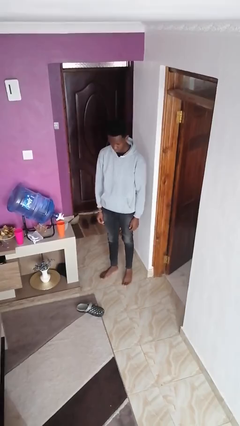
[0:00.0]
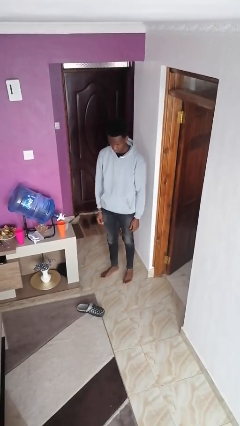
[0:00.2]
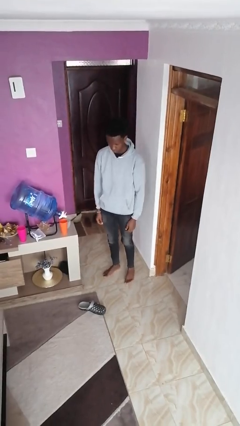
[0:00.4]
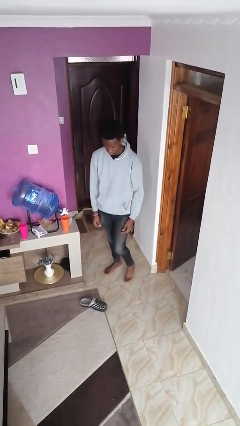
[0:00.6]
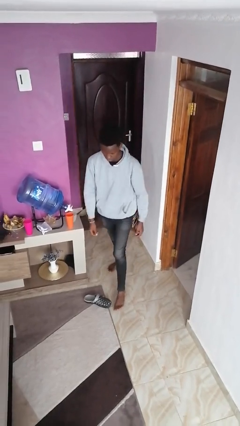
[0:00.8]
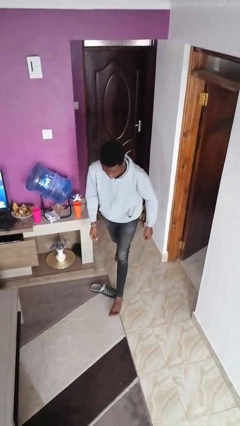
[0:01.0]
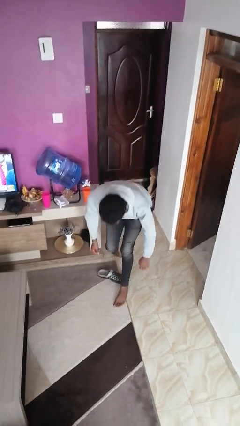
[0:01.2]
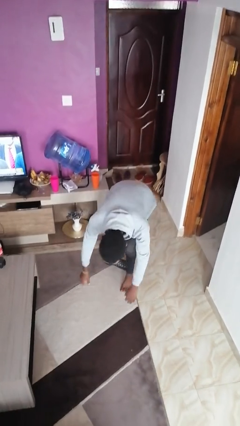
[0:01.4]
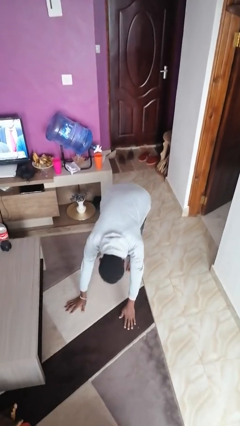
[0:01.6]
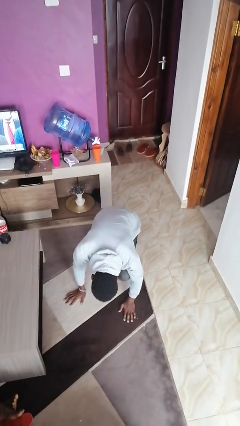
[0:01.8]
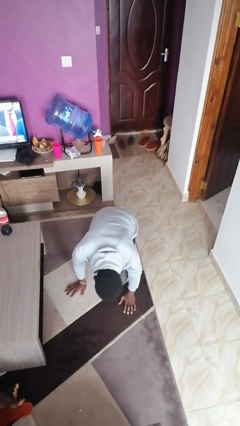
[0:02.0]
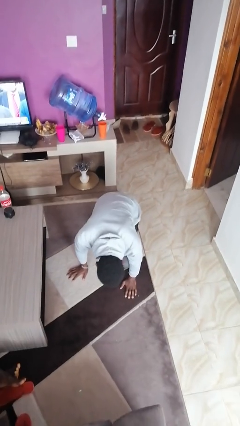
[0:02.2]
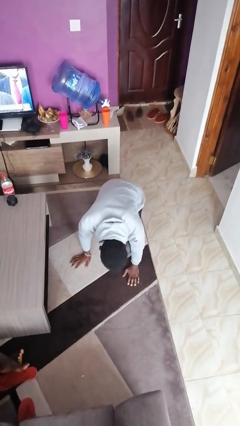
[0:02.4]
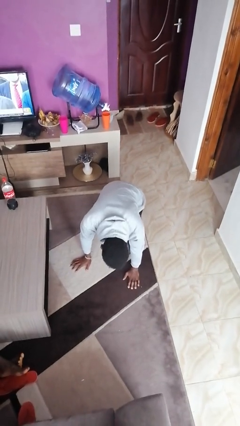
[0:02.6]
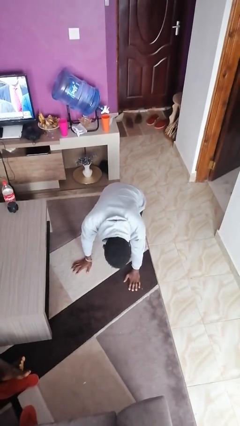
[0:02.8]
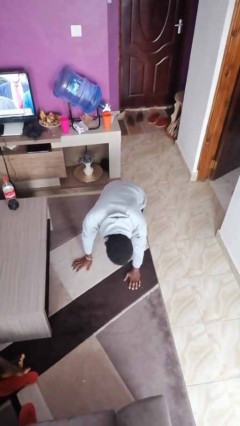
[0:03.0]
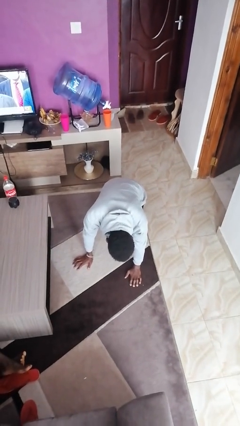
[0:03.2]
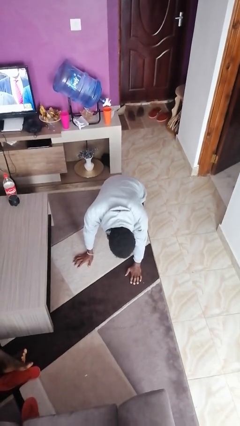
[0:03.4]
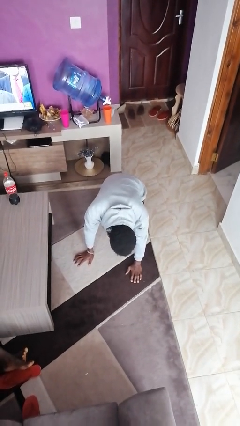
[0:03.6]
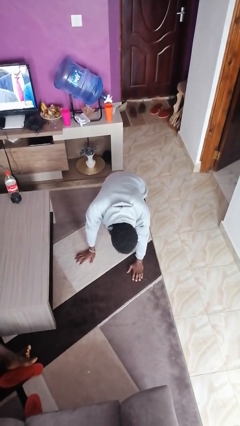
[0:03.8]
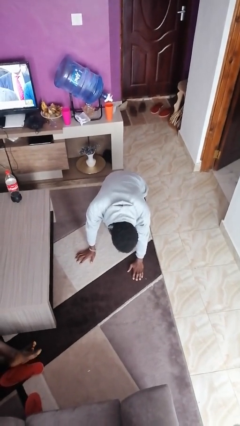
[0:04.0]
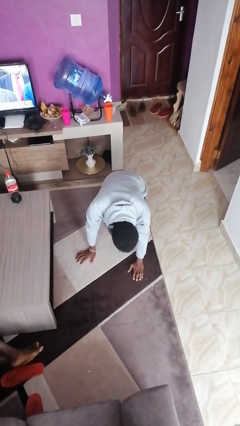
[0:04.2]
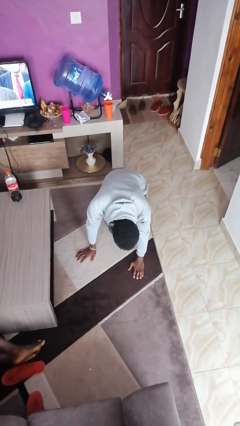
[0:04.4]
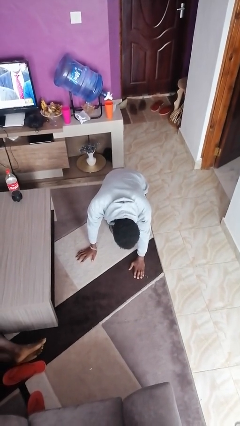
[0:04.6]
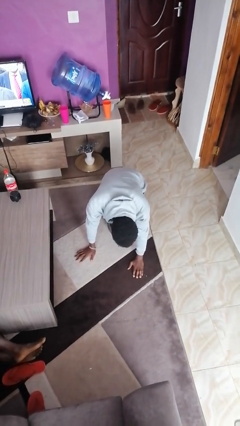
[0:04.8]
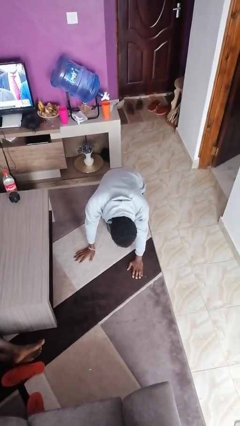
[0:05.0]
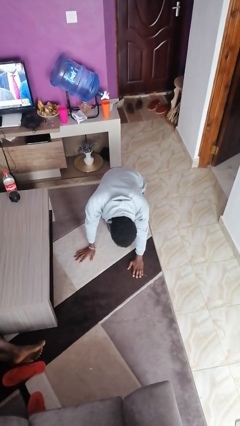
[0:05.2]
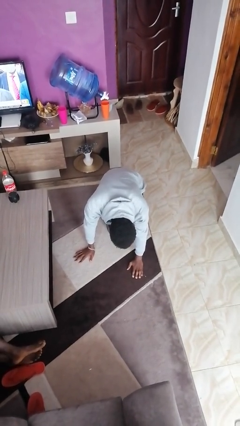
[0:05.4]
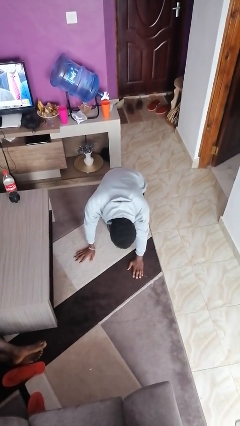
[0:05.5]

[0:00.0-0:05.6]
person trips on object on floor

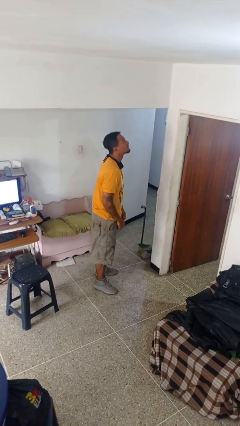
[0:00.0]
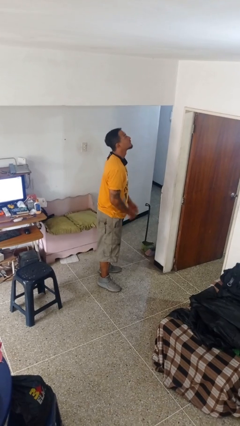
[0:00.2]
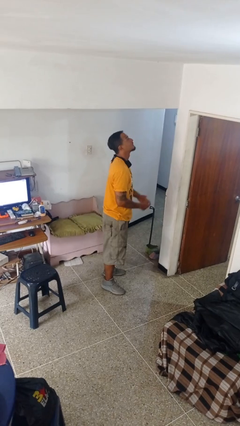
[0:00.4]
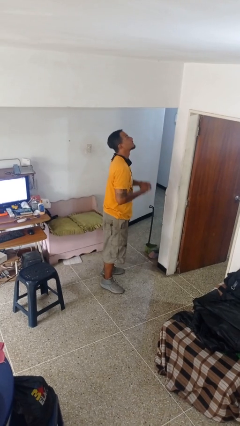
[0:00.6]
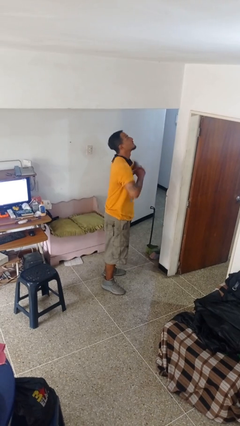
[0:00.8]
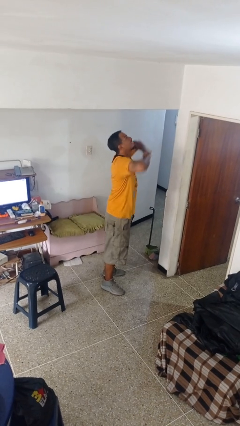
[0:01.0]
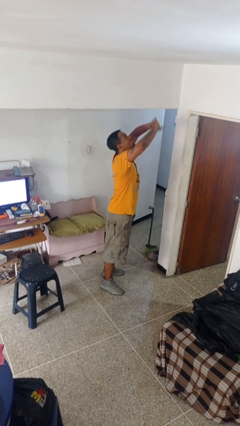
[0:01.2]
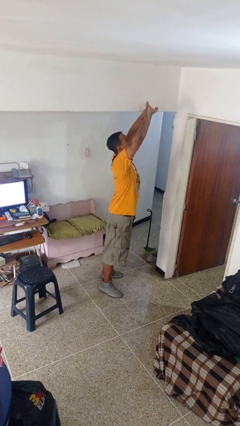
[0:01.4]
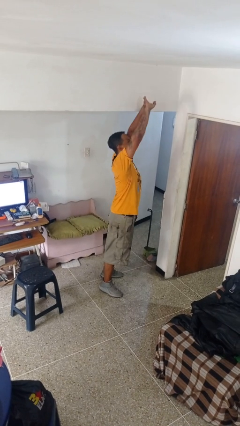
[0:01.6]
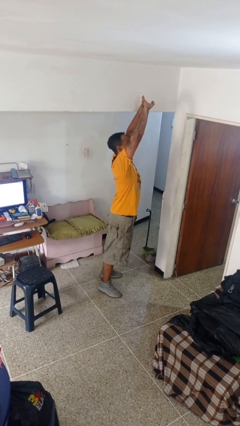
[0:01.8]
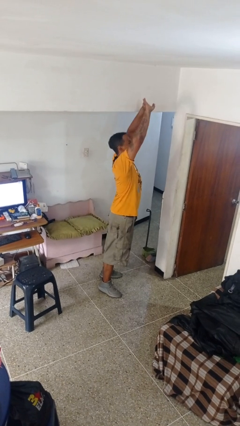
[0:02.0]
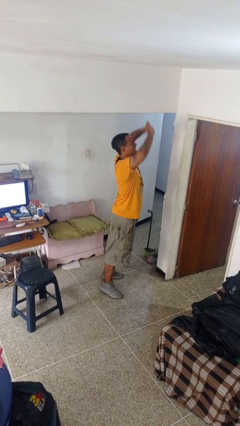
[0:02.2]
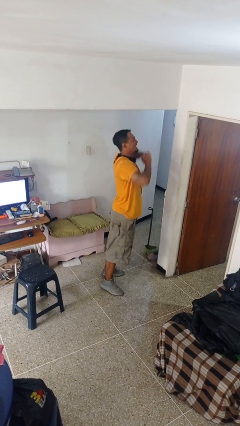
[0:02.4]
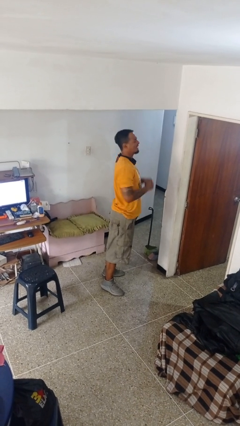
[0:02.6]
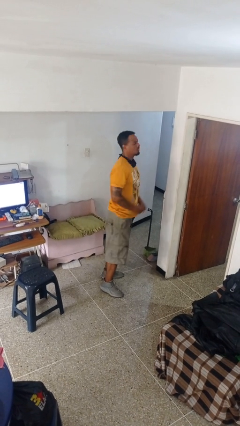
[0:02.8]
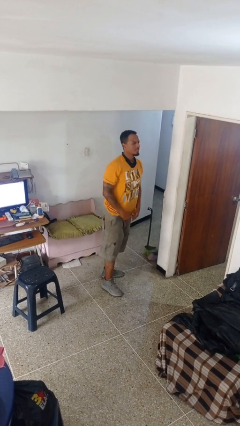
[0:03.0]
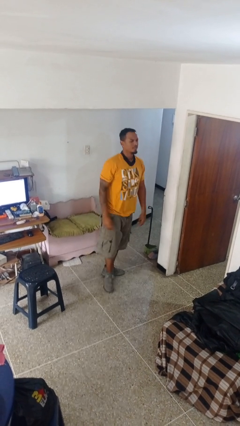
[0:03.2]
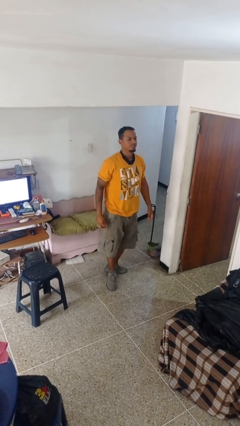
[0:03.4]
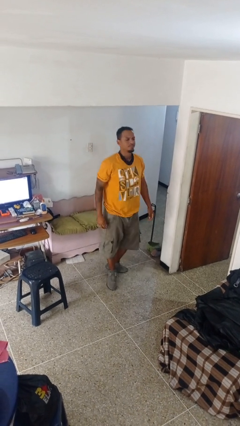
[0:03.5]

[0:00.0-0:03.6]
person stretches arms over head

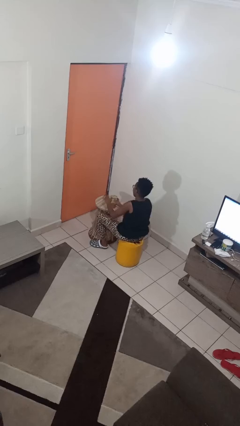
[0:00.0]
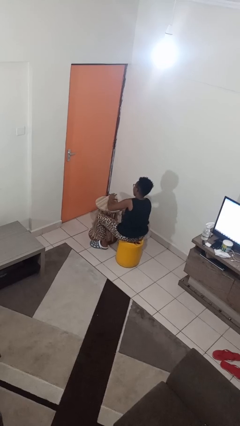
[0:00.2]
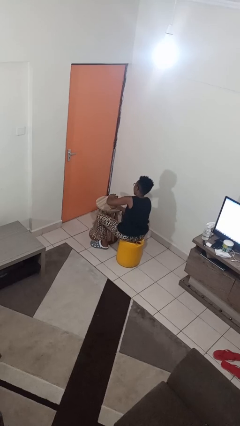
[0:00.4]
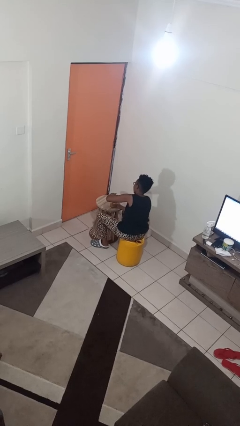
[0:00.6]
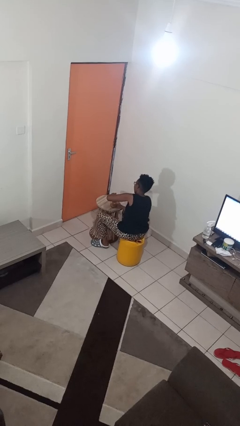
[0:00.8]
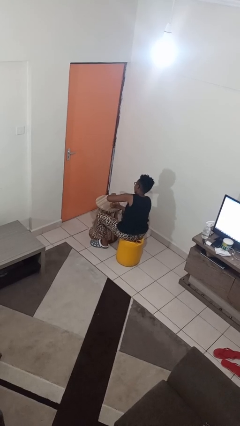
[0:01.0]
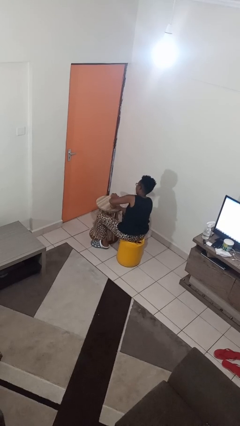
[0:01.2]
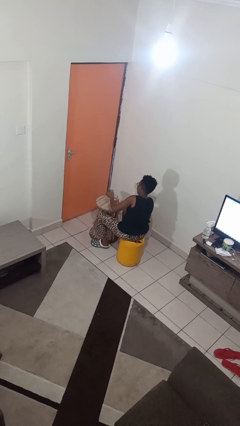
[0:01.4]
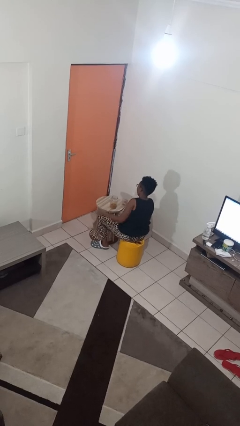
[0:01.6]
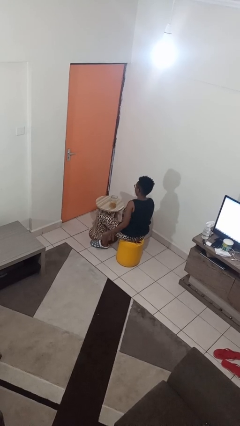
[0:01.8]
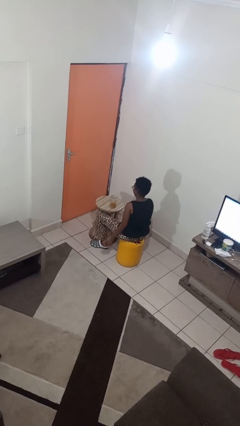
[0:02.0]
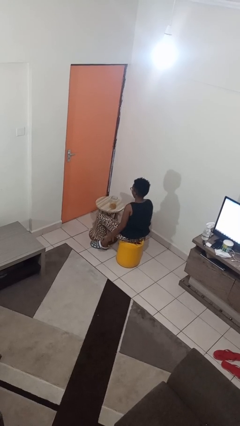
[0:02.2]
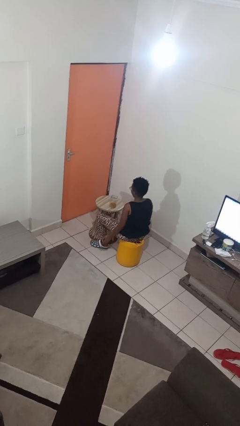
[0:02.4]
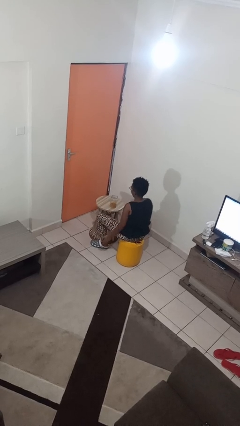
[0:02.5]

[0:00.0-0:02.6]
person opens jar

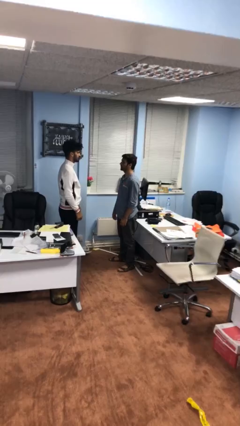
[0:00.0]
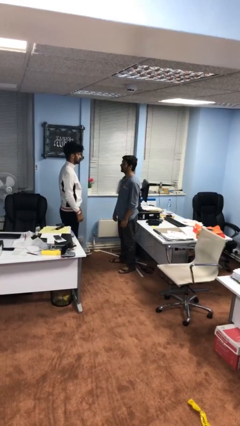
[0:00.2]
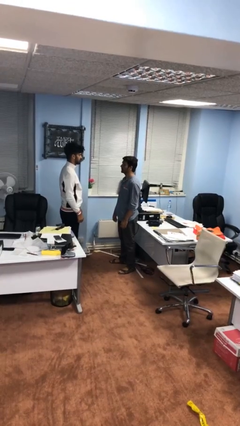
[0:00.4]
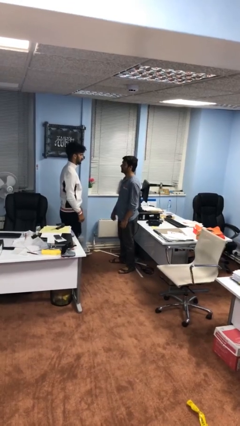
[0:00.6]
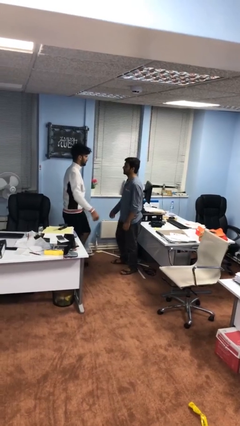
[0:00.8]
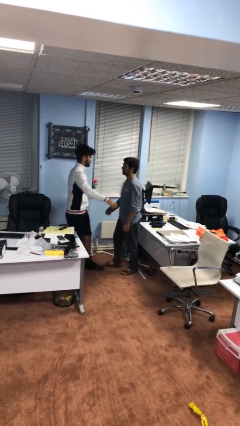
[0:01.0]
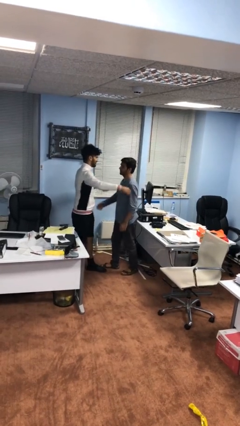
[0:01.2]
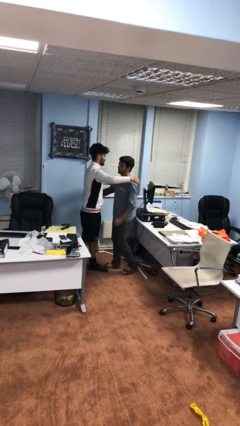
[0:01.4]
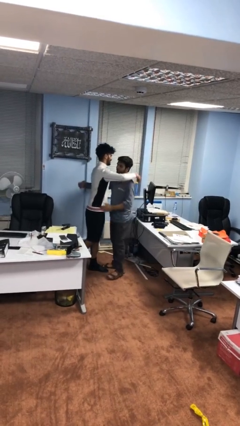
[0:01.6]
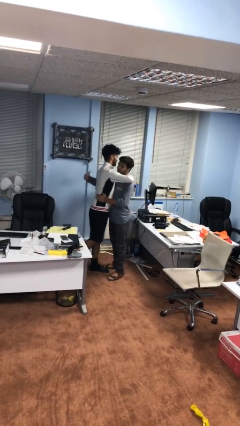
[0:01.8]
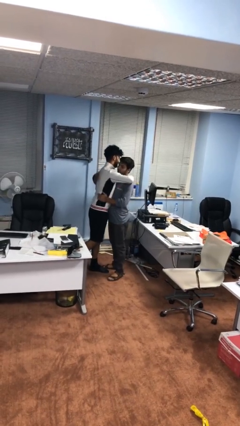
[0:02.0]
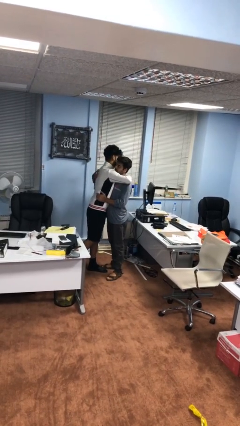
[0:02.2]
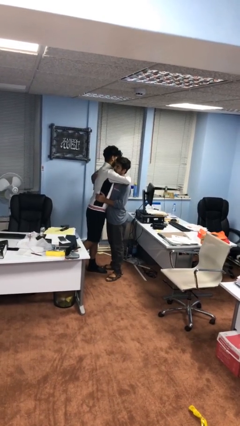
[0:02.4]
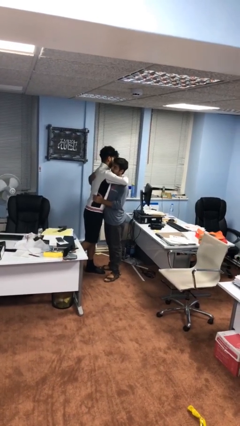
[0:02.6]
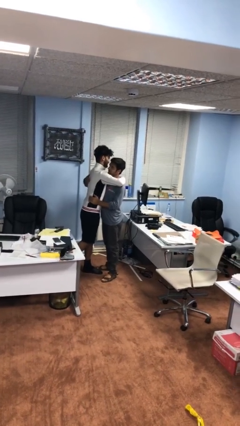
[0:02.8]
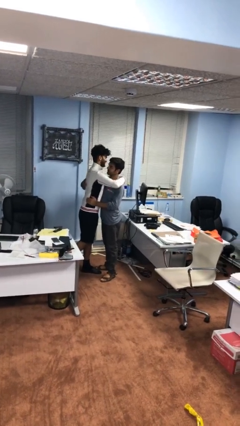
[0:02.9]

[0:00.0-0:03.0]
person embraces person

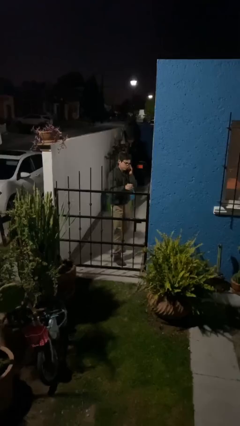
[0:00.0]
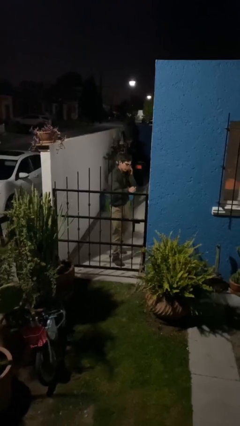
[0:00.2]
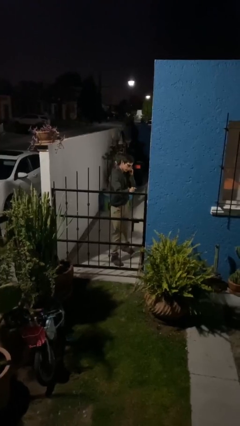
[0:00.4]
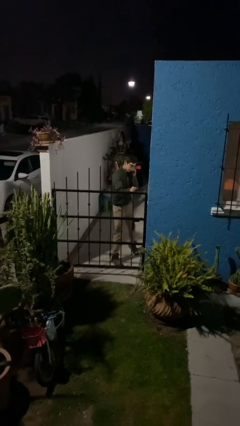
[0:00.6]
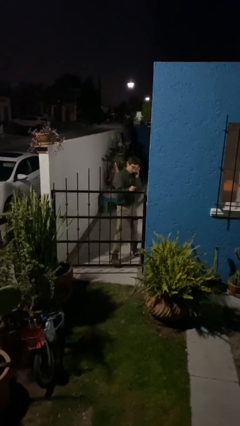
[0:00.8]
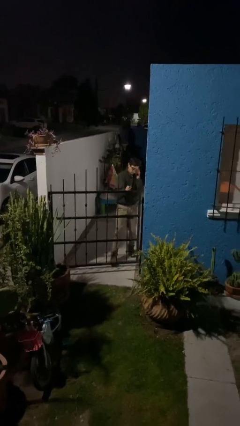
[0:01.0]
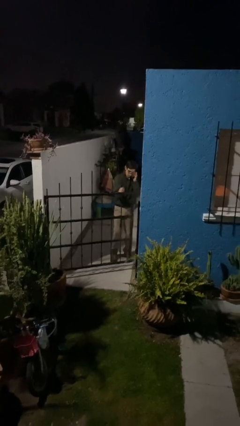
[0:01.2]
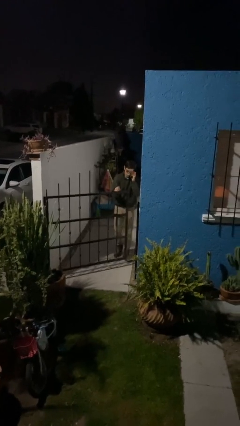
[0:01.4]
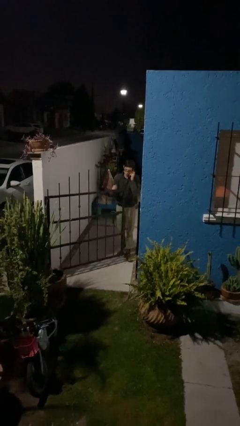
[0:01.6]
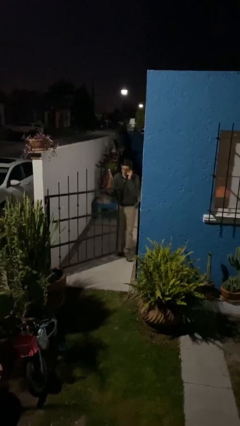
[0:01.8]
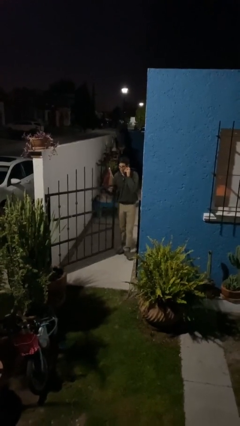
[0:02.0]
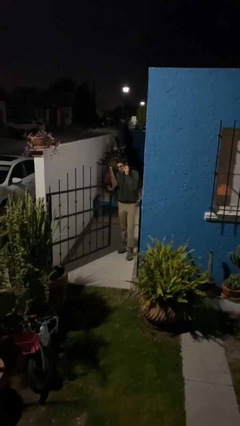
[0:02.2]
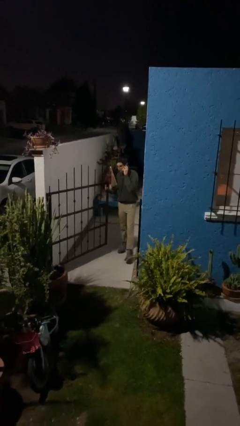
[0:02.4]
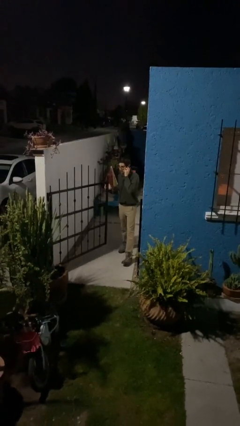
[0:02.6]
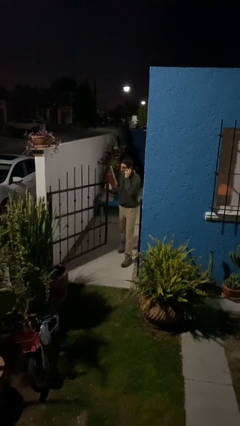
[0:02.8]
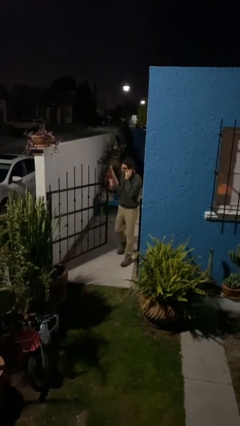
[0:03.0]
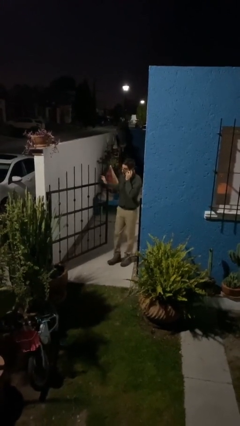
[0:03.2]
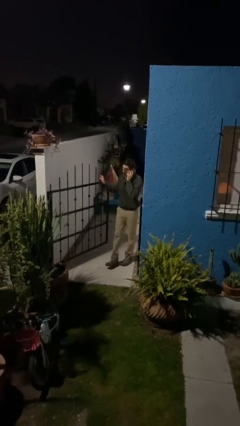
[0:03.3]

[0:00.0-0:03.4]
person opens facility door
